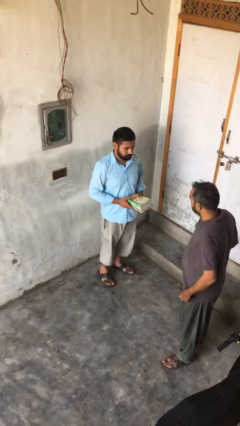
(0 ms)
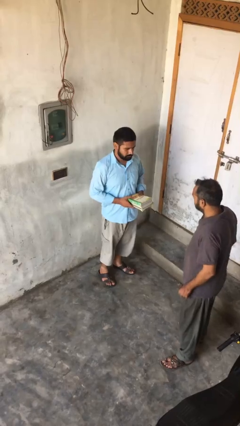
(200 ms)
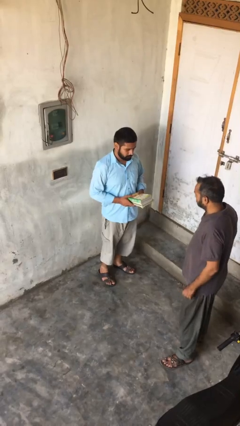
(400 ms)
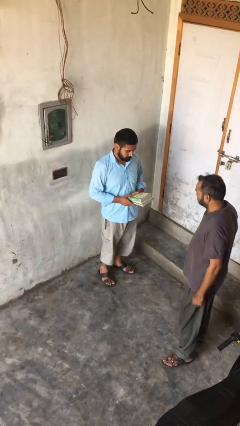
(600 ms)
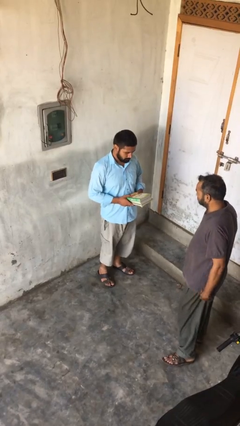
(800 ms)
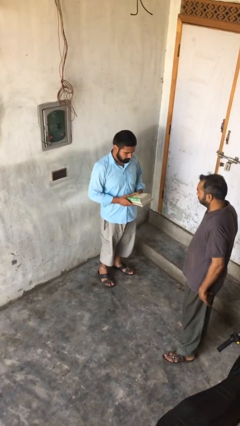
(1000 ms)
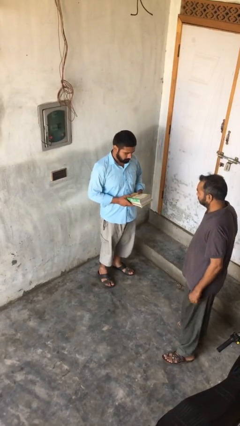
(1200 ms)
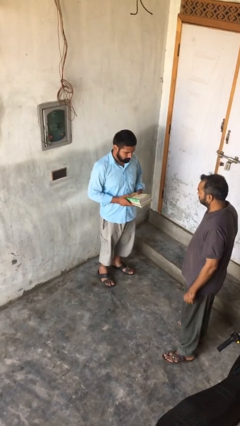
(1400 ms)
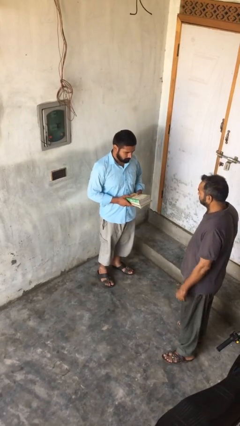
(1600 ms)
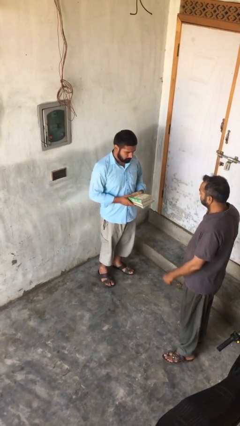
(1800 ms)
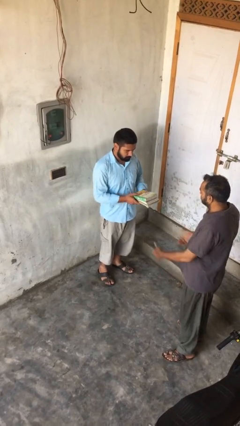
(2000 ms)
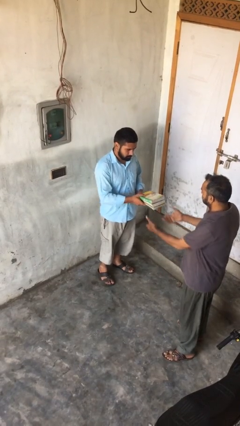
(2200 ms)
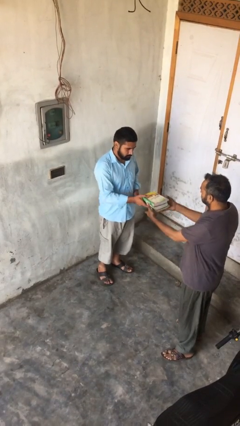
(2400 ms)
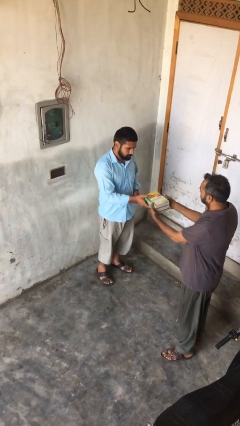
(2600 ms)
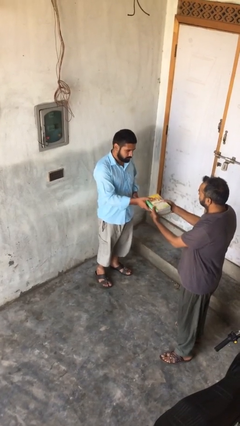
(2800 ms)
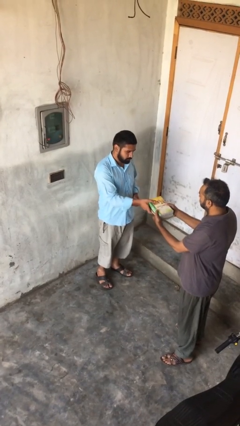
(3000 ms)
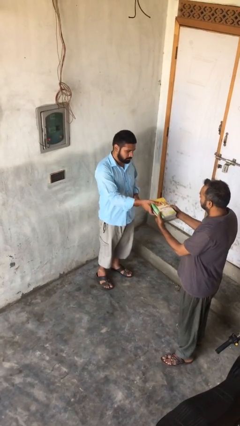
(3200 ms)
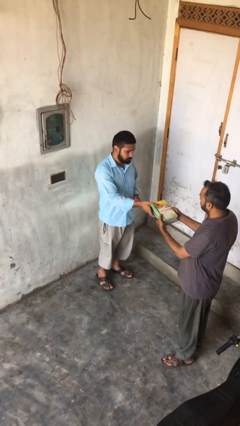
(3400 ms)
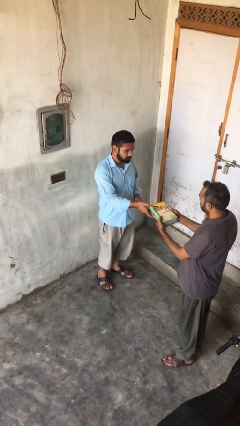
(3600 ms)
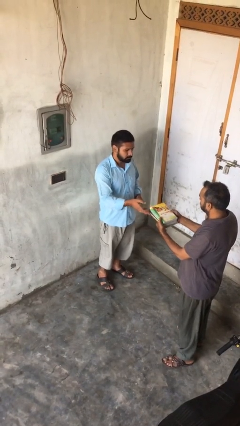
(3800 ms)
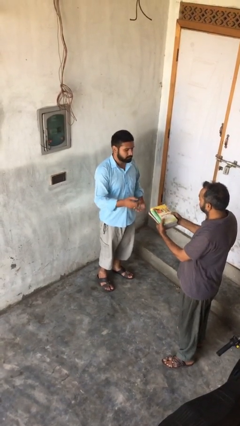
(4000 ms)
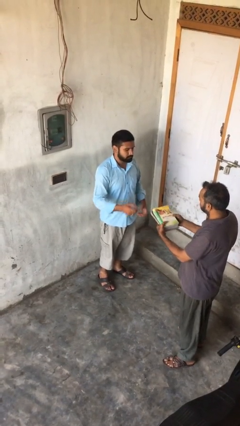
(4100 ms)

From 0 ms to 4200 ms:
person transfers object to person

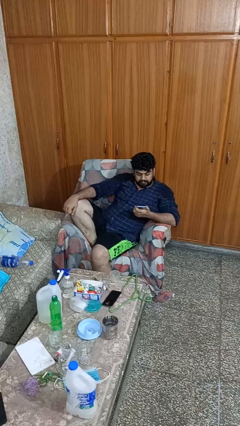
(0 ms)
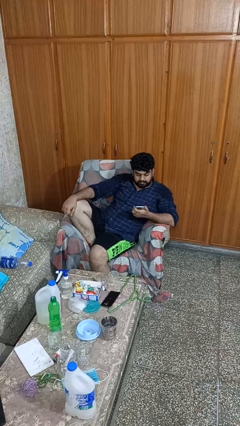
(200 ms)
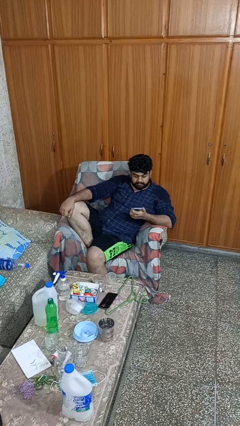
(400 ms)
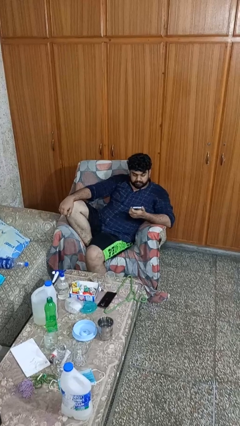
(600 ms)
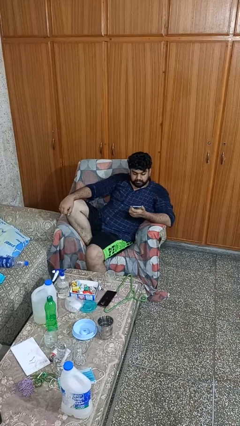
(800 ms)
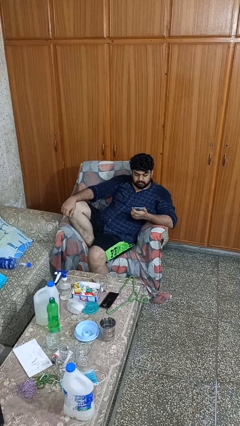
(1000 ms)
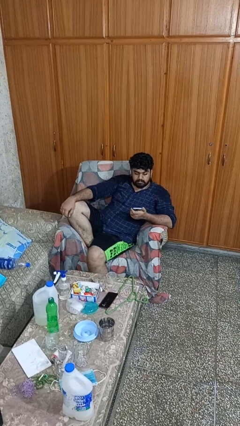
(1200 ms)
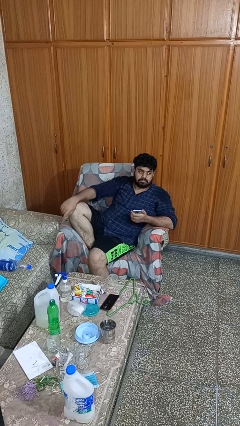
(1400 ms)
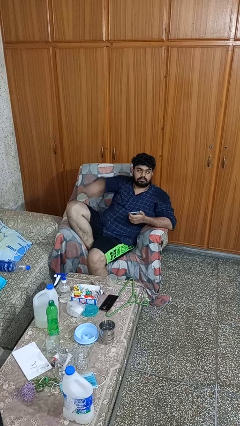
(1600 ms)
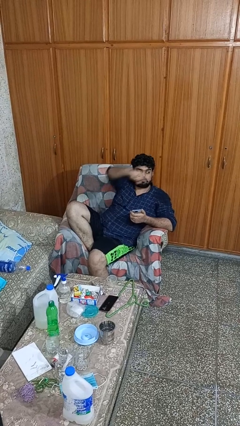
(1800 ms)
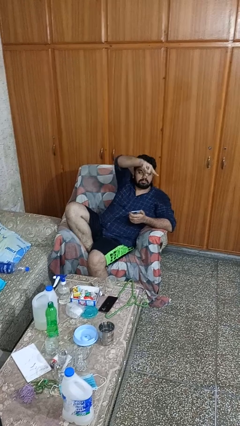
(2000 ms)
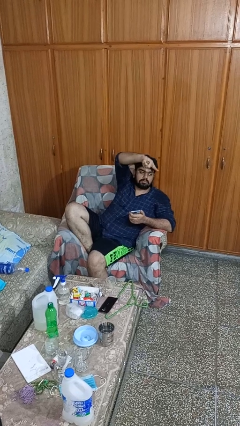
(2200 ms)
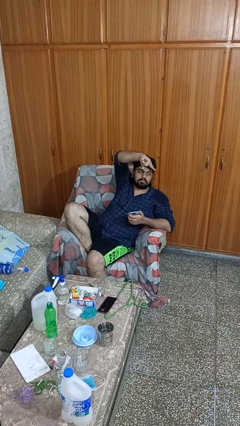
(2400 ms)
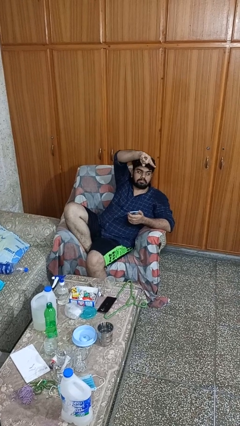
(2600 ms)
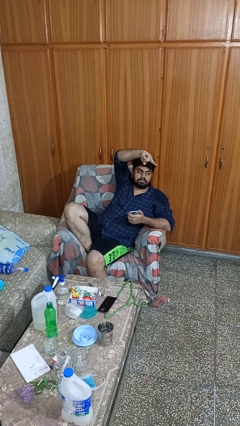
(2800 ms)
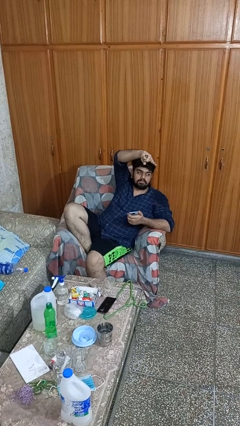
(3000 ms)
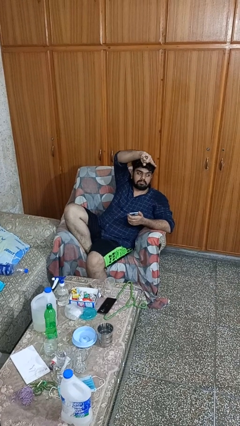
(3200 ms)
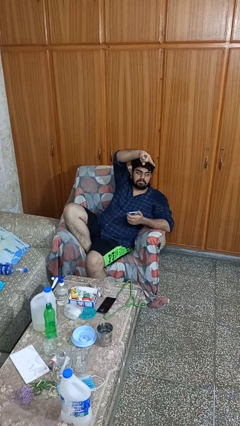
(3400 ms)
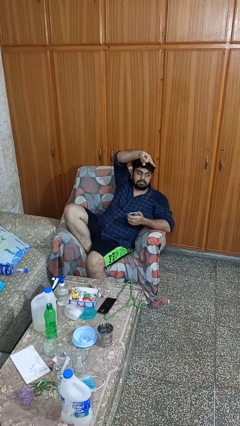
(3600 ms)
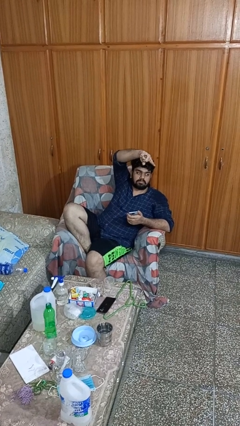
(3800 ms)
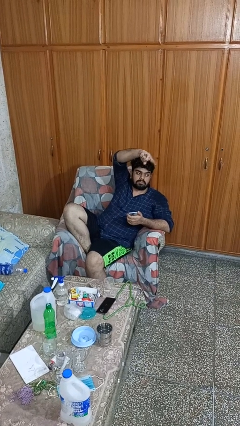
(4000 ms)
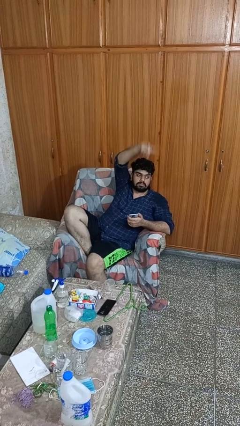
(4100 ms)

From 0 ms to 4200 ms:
person points at person

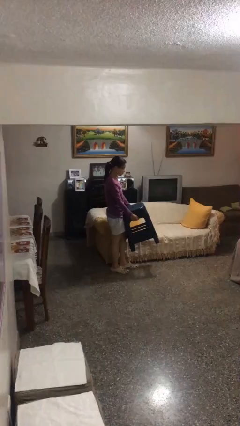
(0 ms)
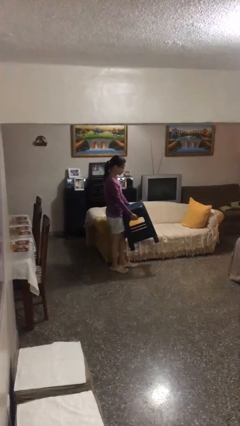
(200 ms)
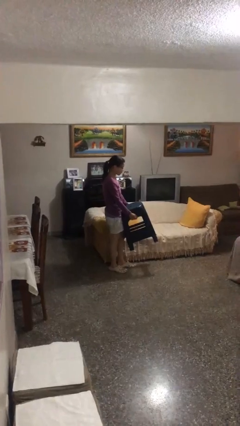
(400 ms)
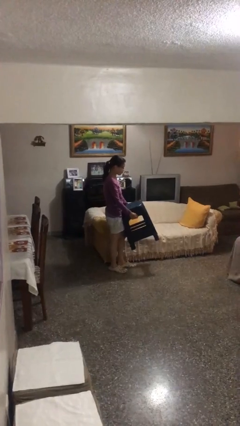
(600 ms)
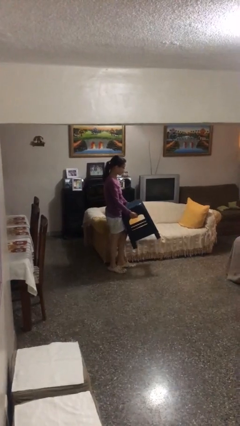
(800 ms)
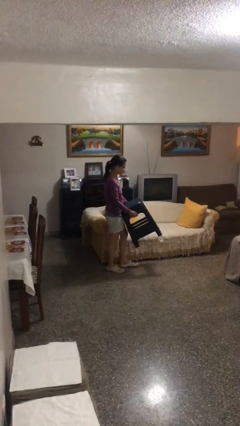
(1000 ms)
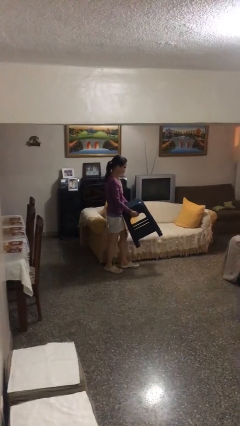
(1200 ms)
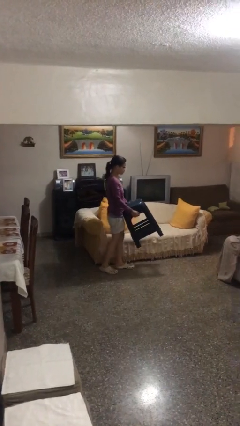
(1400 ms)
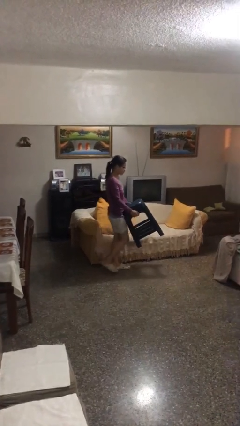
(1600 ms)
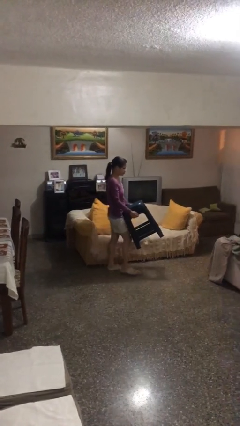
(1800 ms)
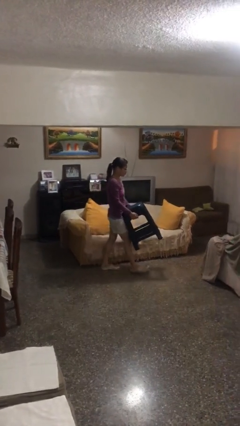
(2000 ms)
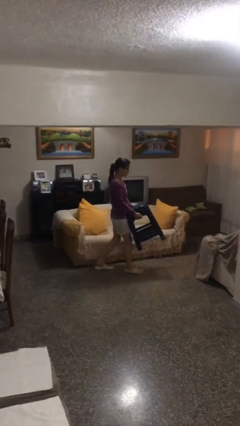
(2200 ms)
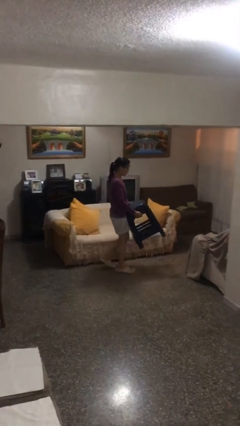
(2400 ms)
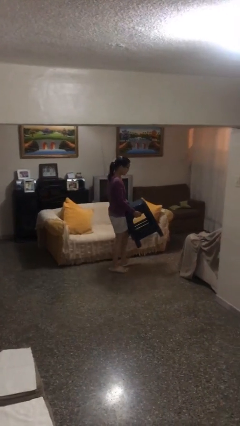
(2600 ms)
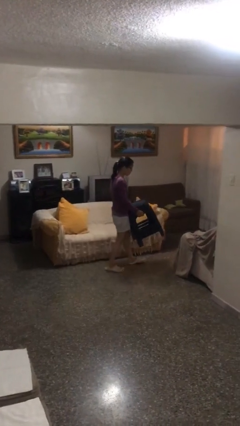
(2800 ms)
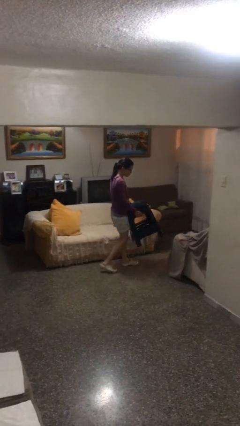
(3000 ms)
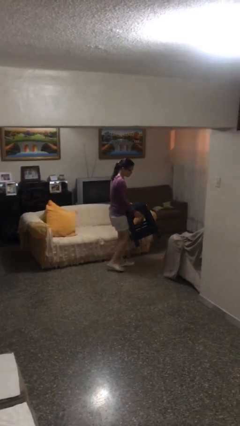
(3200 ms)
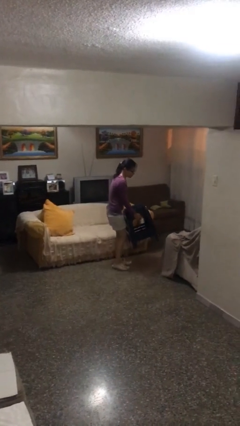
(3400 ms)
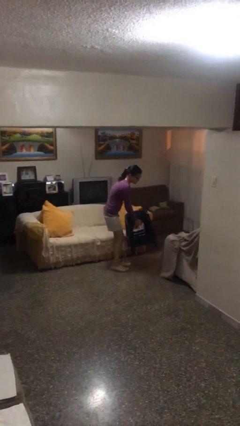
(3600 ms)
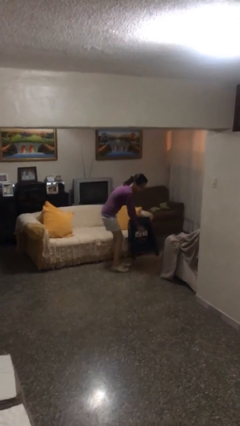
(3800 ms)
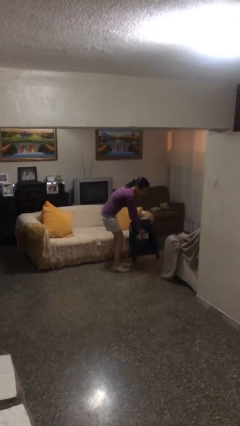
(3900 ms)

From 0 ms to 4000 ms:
person carries heavy object

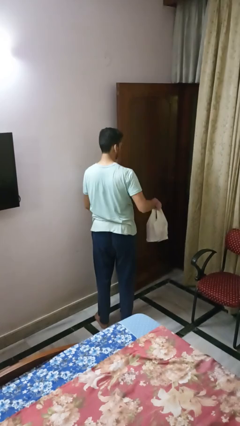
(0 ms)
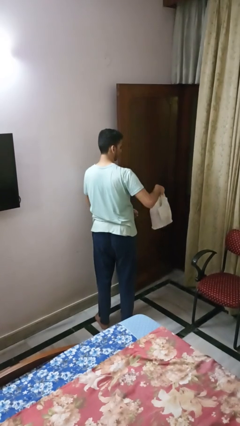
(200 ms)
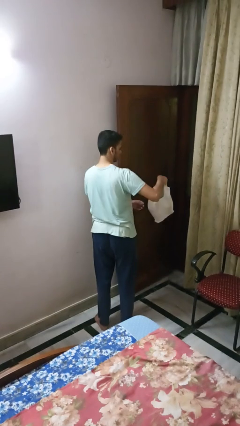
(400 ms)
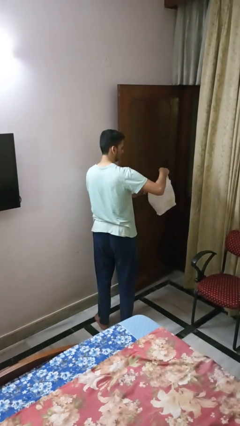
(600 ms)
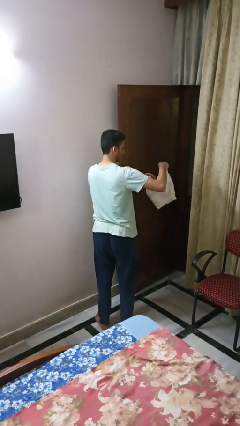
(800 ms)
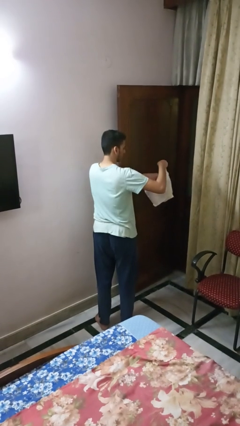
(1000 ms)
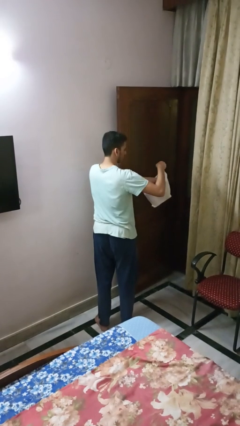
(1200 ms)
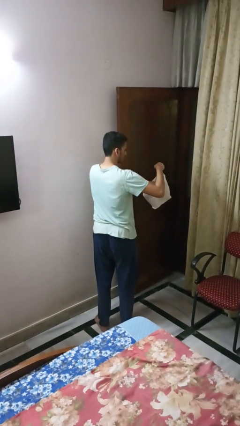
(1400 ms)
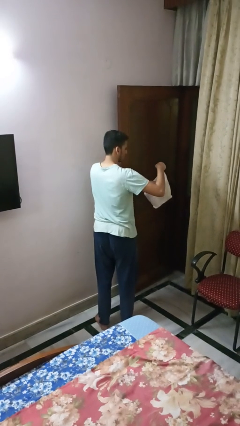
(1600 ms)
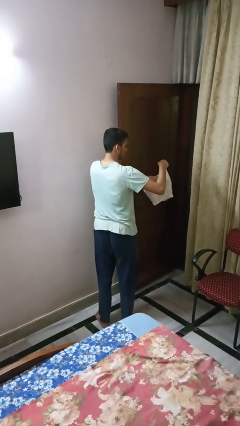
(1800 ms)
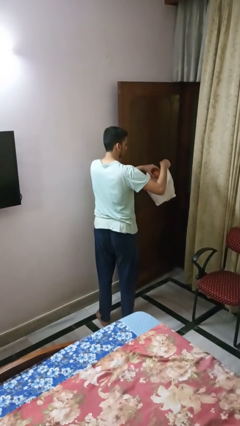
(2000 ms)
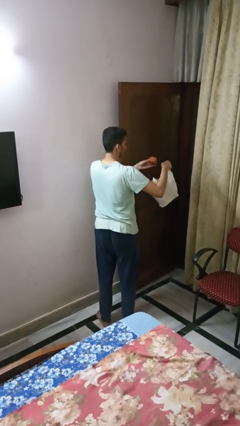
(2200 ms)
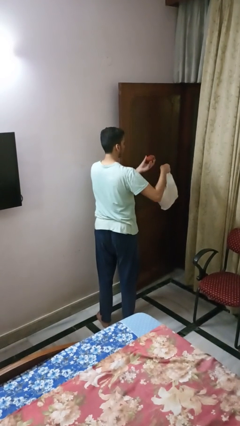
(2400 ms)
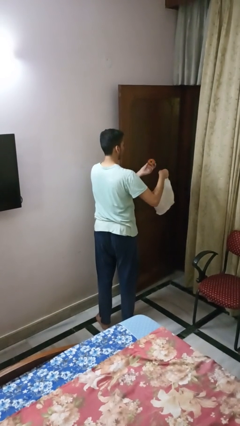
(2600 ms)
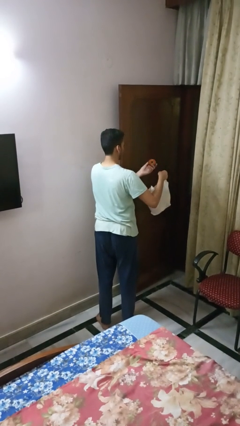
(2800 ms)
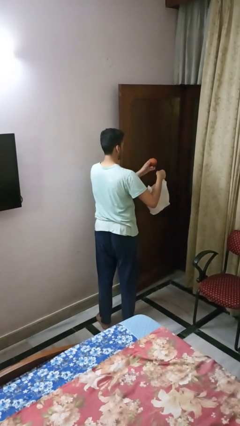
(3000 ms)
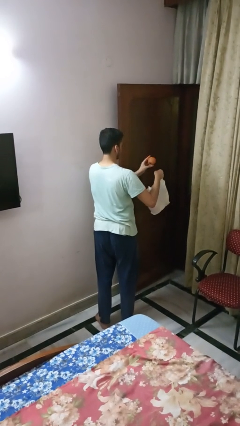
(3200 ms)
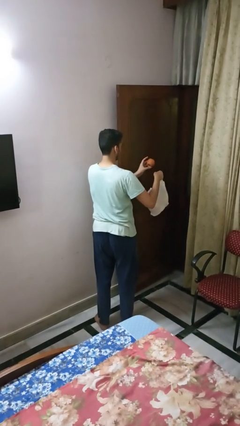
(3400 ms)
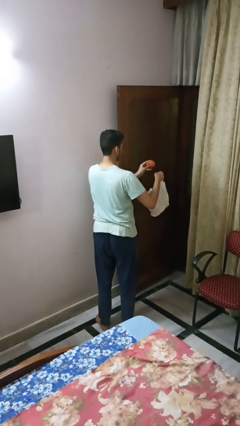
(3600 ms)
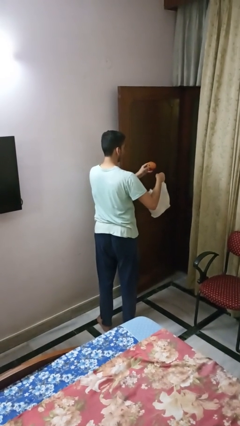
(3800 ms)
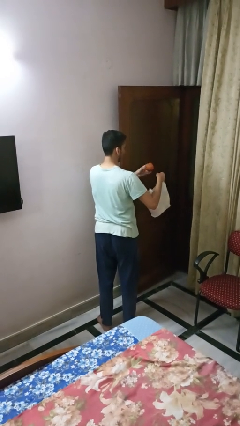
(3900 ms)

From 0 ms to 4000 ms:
person takes object from bag

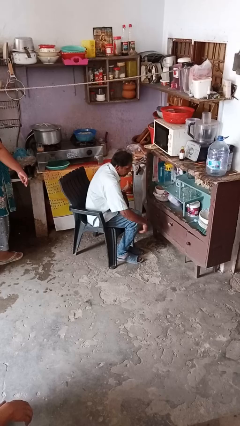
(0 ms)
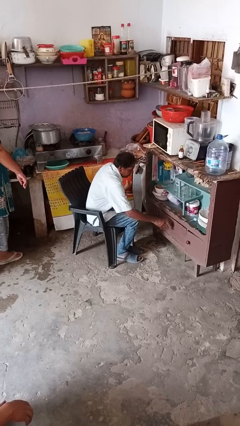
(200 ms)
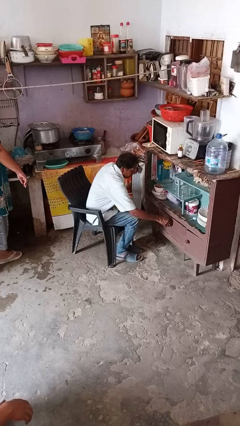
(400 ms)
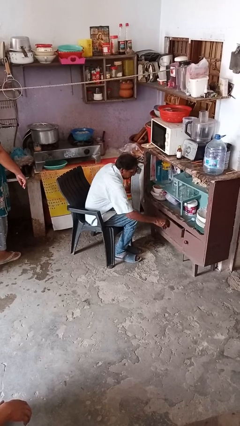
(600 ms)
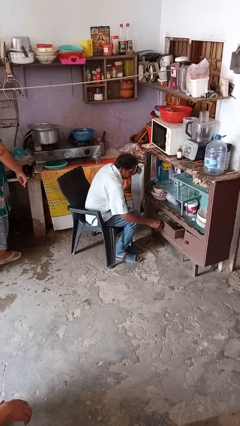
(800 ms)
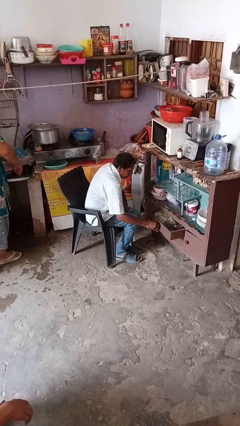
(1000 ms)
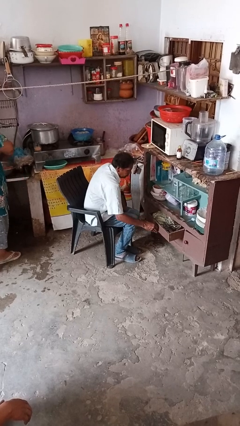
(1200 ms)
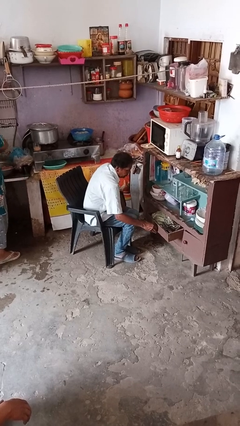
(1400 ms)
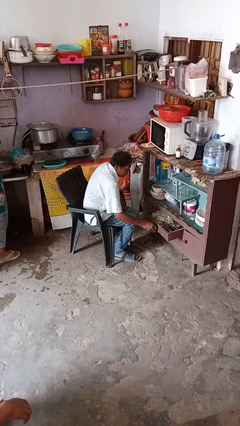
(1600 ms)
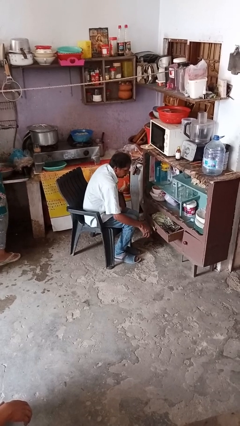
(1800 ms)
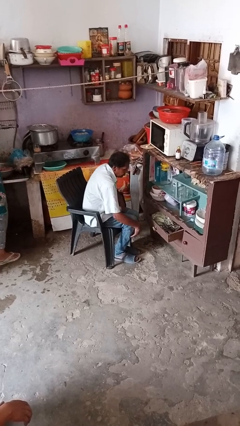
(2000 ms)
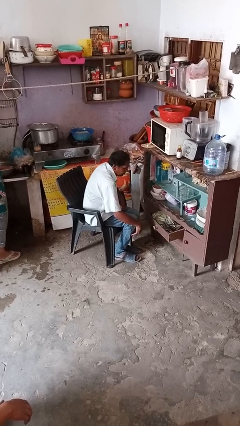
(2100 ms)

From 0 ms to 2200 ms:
person opens dresser drawer
